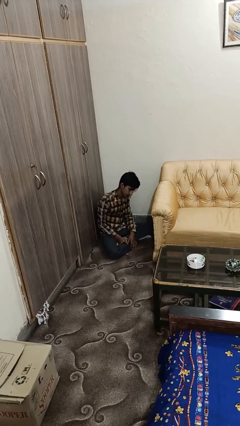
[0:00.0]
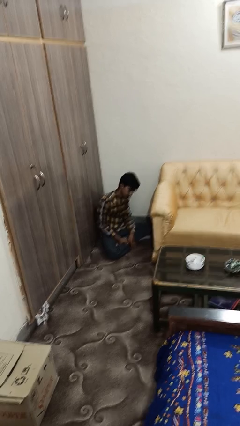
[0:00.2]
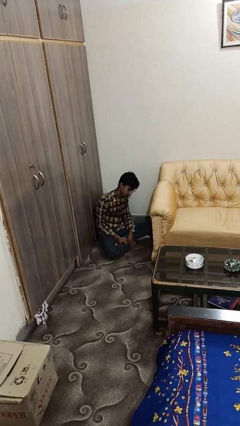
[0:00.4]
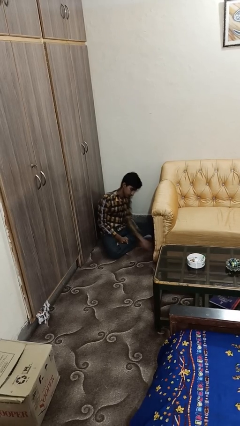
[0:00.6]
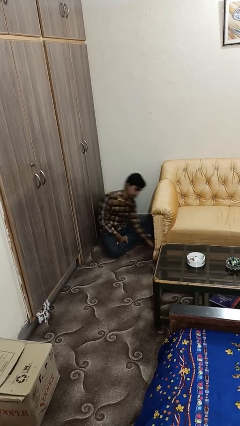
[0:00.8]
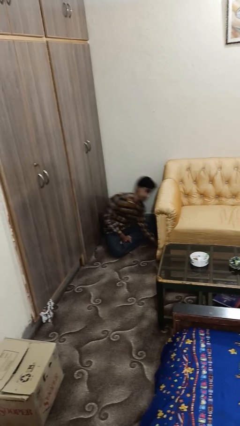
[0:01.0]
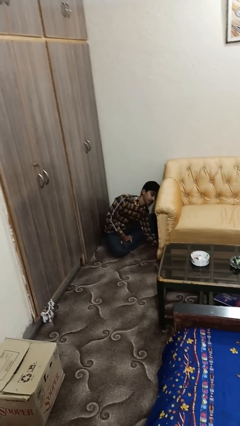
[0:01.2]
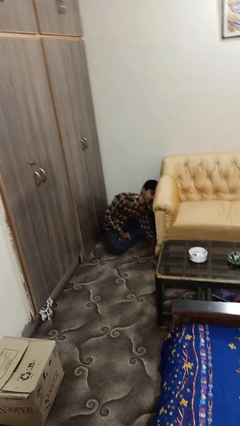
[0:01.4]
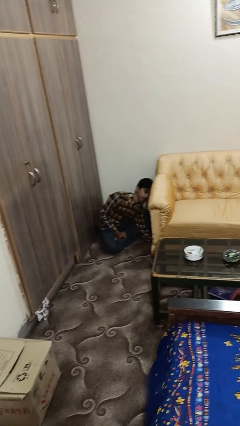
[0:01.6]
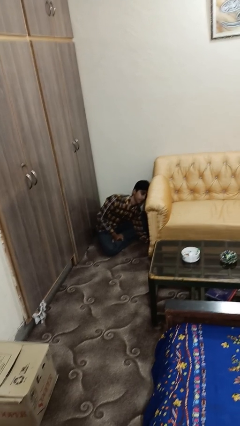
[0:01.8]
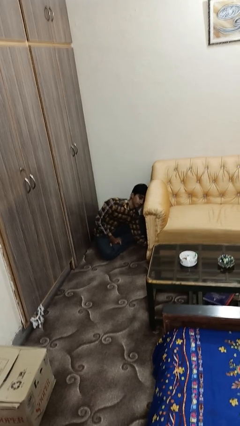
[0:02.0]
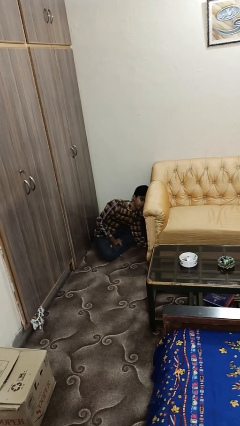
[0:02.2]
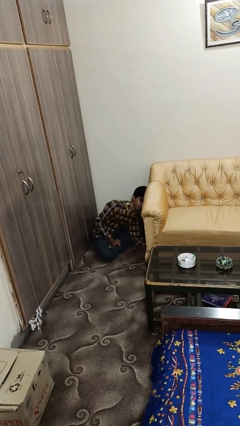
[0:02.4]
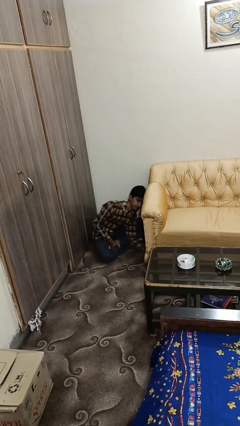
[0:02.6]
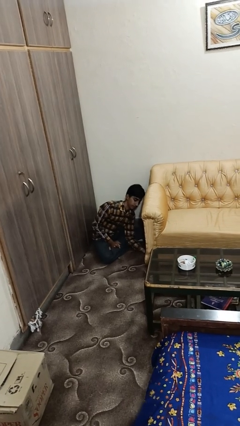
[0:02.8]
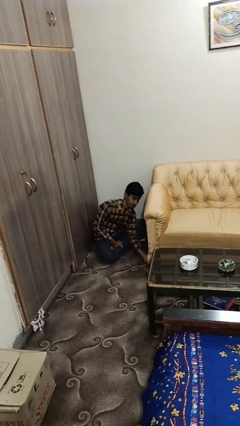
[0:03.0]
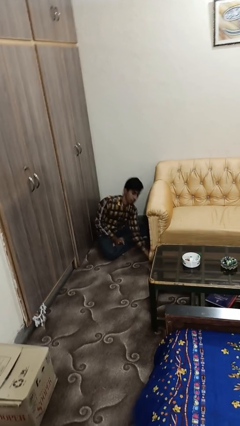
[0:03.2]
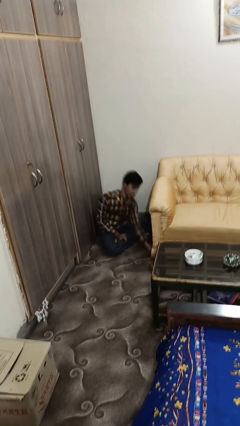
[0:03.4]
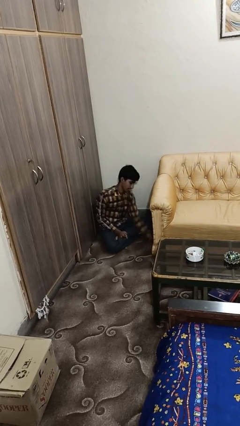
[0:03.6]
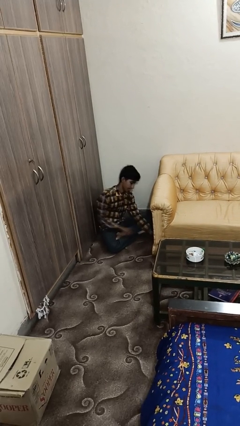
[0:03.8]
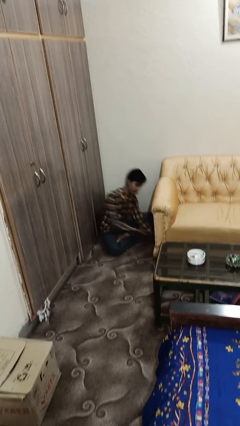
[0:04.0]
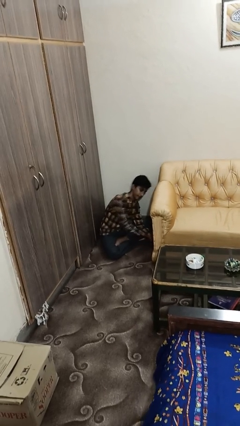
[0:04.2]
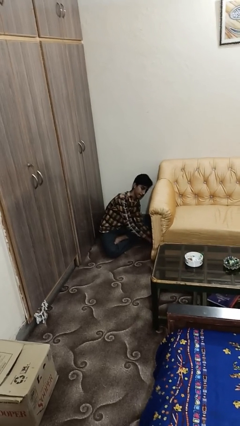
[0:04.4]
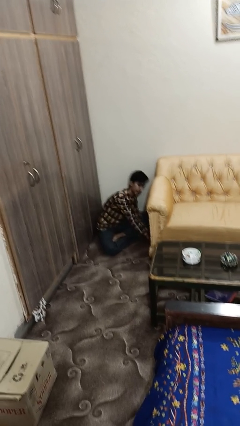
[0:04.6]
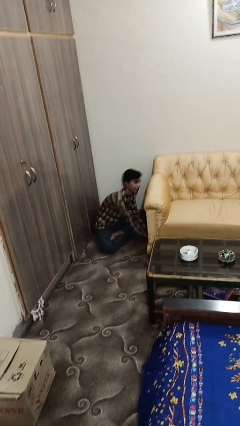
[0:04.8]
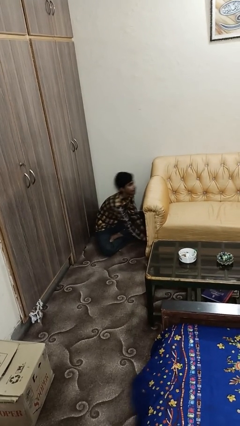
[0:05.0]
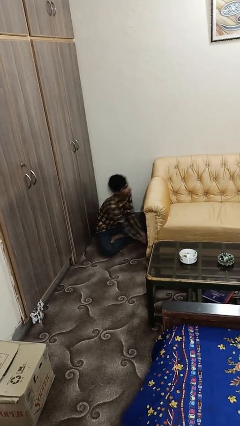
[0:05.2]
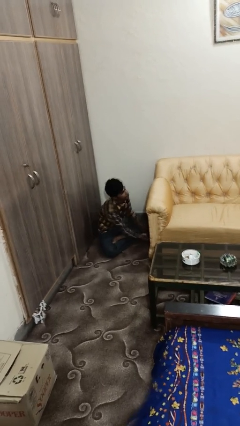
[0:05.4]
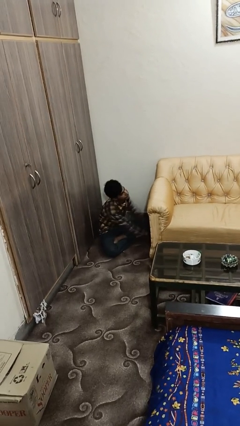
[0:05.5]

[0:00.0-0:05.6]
person searches under couch

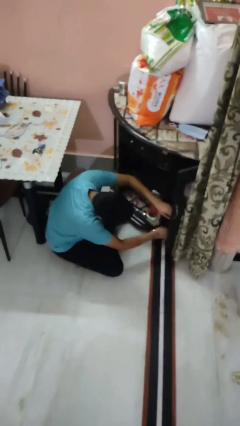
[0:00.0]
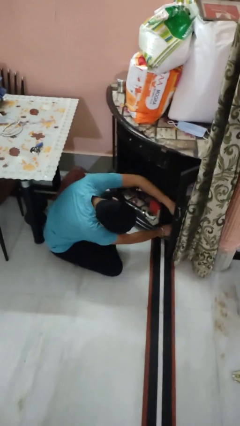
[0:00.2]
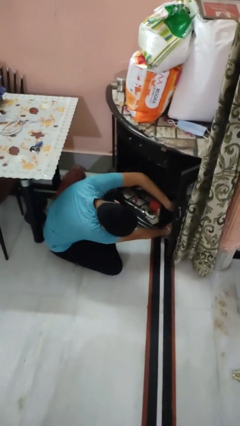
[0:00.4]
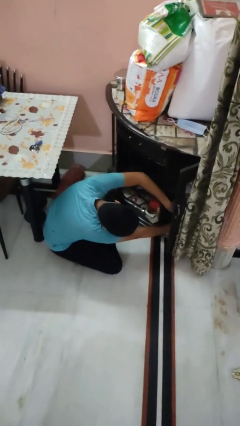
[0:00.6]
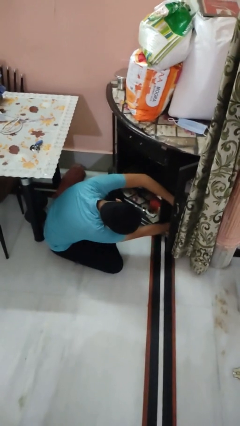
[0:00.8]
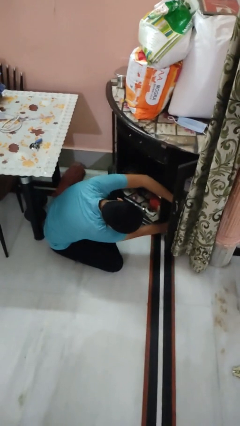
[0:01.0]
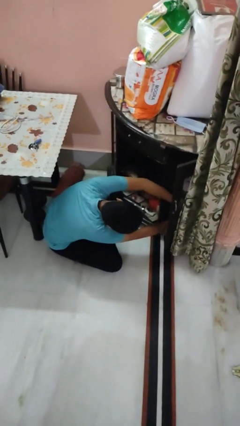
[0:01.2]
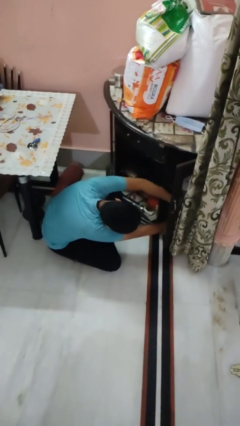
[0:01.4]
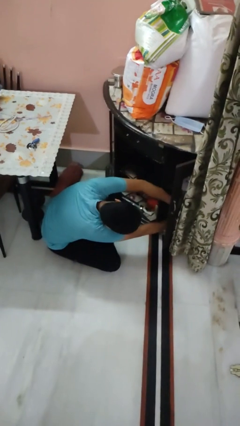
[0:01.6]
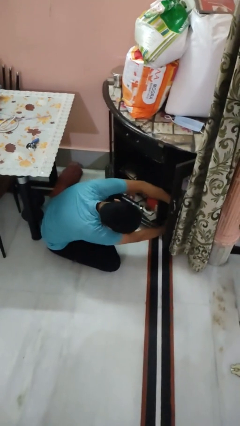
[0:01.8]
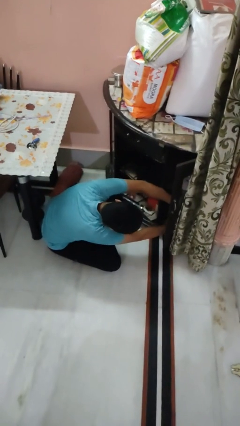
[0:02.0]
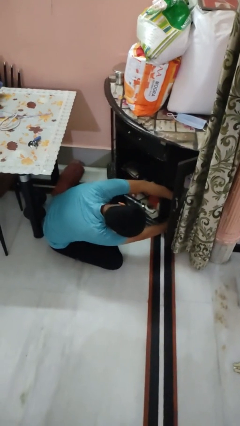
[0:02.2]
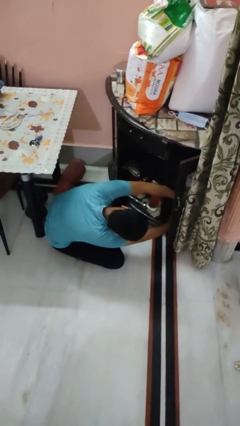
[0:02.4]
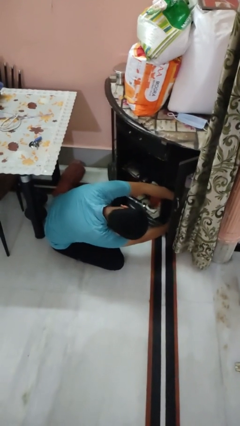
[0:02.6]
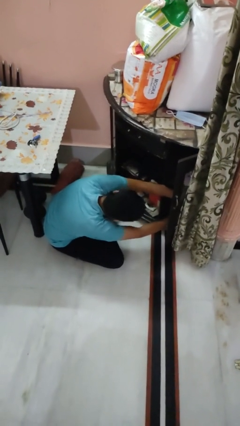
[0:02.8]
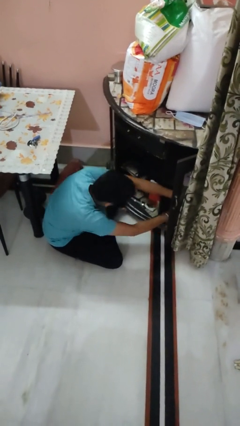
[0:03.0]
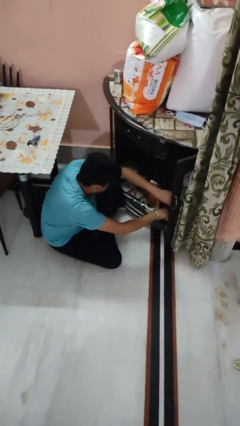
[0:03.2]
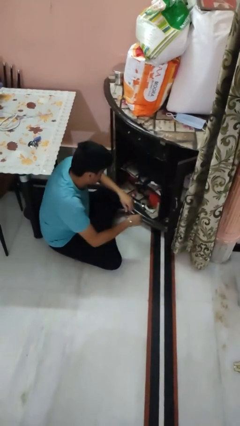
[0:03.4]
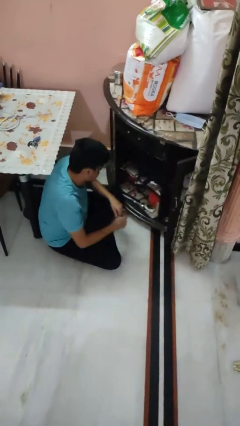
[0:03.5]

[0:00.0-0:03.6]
person searches in cabinet

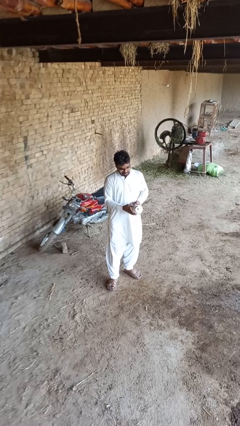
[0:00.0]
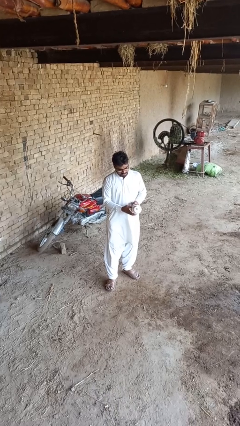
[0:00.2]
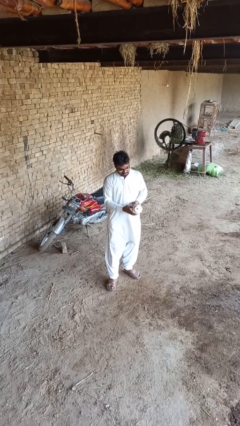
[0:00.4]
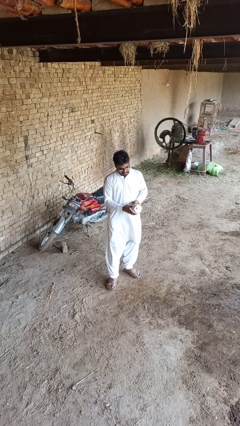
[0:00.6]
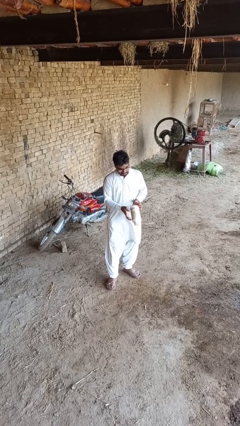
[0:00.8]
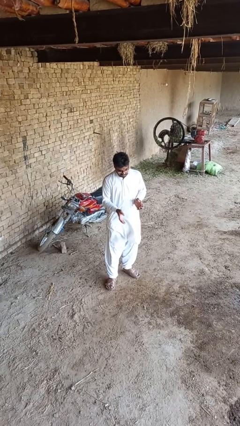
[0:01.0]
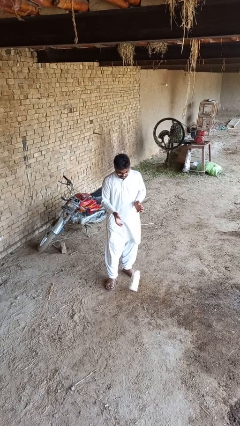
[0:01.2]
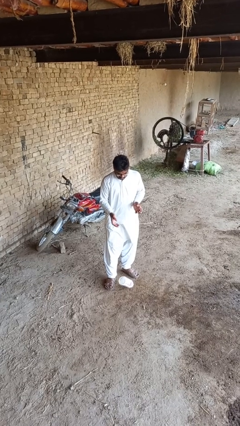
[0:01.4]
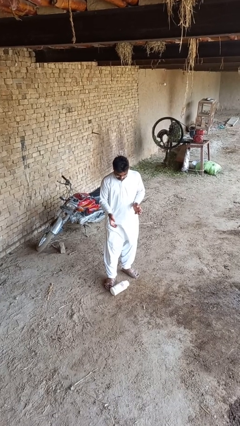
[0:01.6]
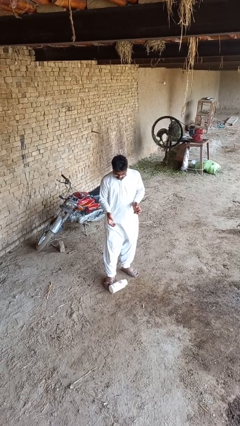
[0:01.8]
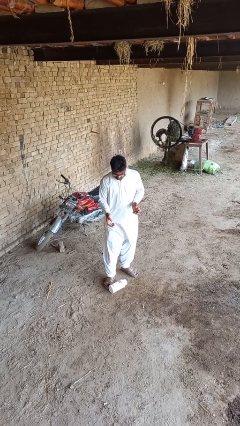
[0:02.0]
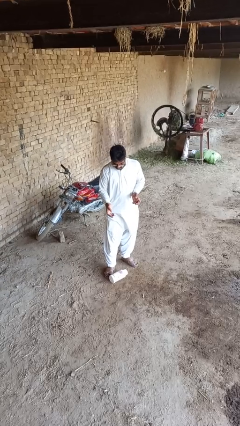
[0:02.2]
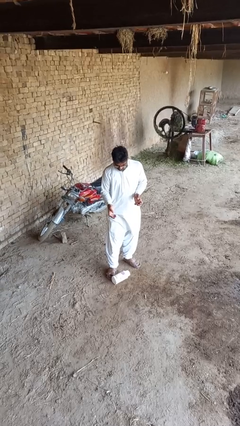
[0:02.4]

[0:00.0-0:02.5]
person drops object

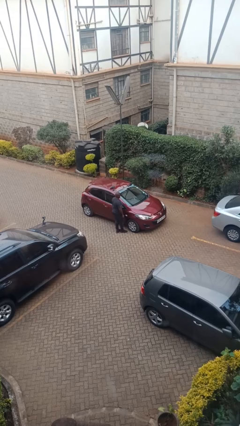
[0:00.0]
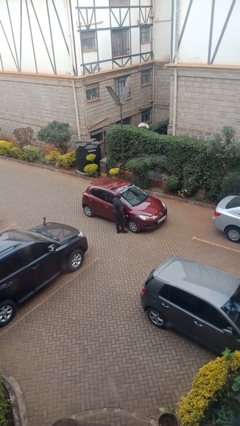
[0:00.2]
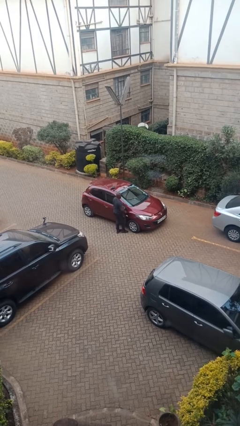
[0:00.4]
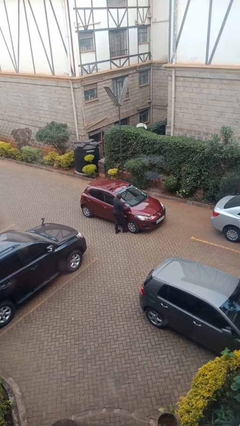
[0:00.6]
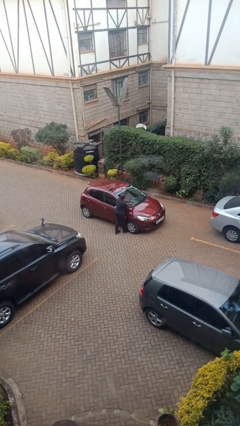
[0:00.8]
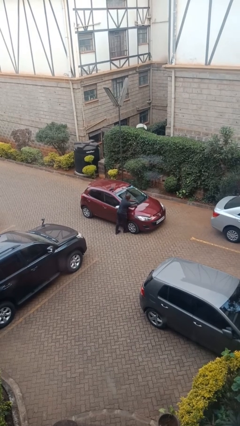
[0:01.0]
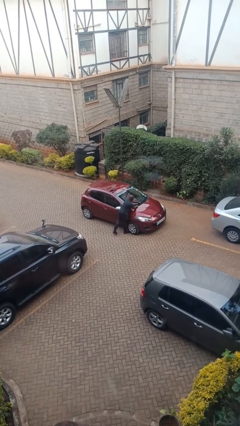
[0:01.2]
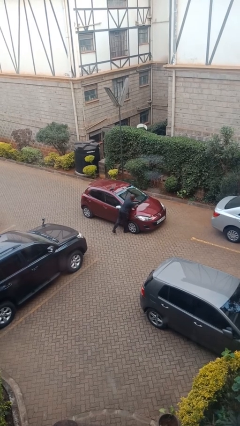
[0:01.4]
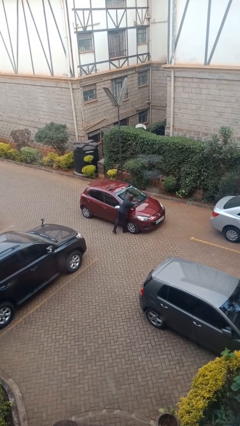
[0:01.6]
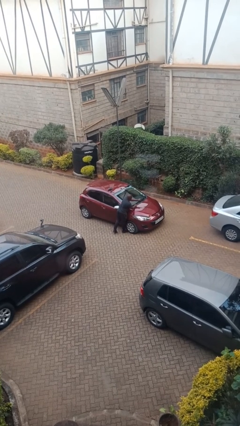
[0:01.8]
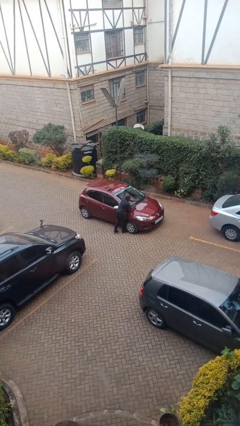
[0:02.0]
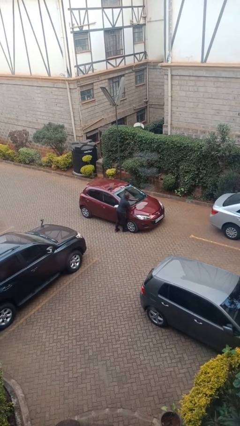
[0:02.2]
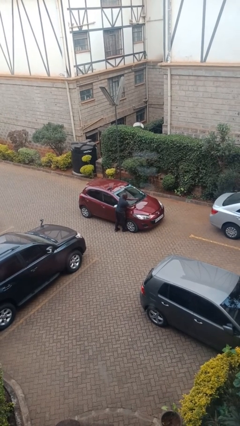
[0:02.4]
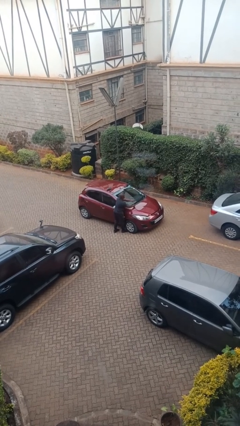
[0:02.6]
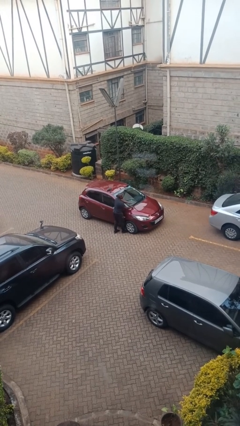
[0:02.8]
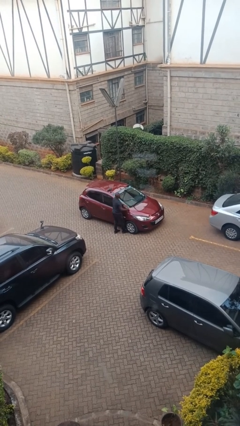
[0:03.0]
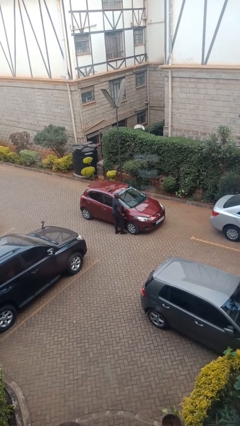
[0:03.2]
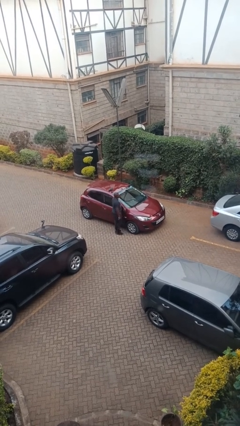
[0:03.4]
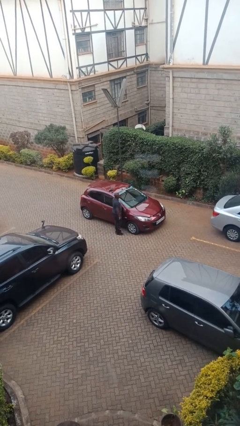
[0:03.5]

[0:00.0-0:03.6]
person flips up car wipers

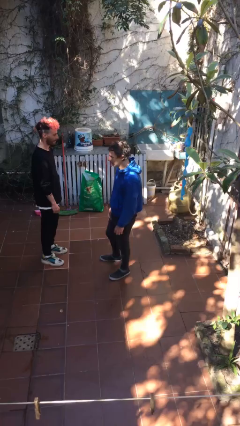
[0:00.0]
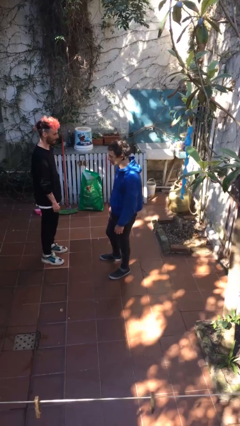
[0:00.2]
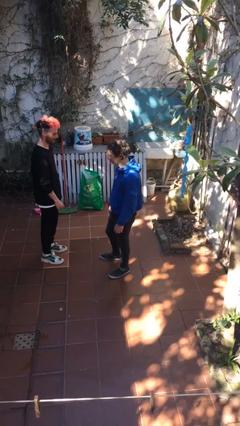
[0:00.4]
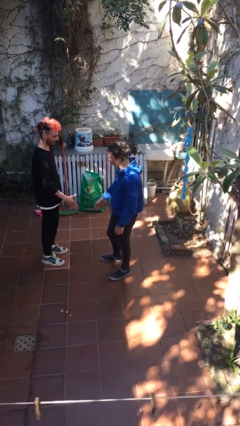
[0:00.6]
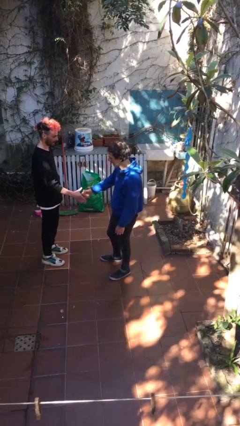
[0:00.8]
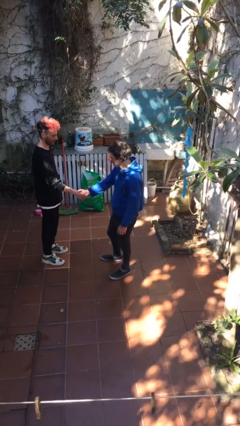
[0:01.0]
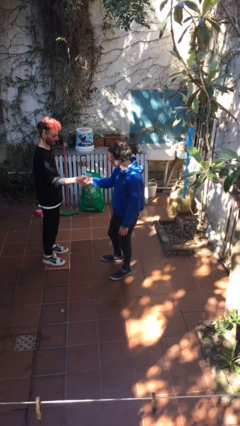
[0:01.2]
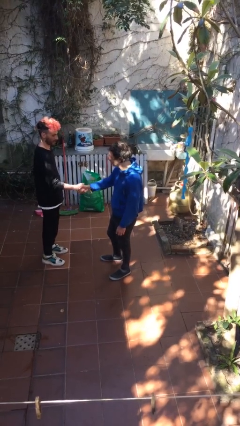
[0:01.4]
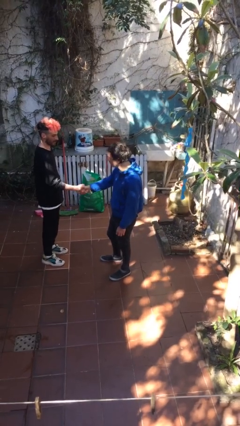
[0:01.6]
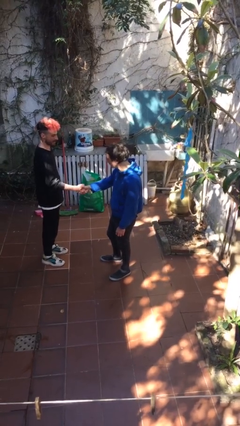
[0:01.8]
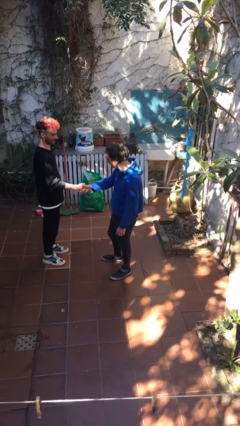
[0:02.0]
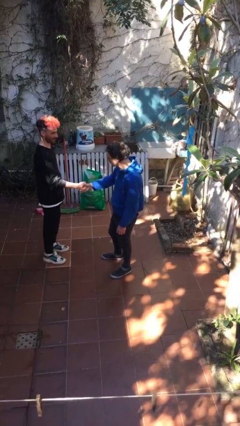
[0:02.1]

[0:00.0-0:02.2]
person shakes hand
